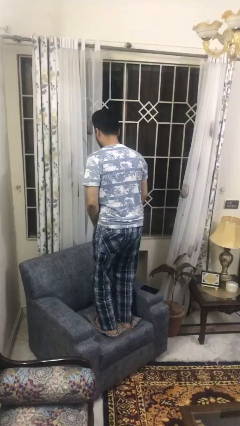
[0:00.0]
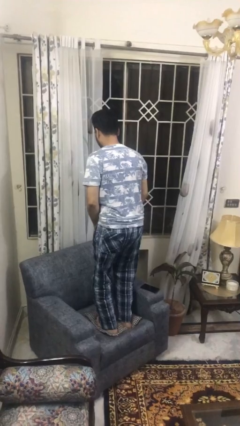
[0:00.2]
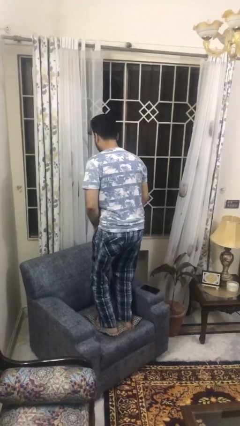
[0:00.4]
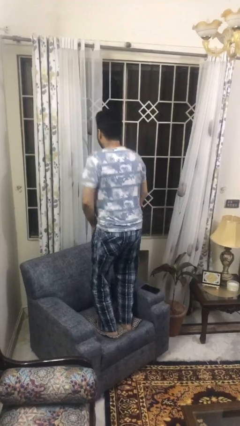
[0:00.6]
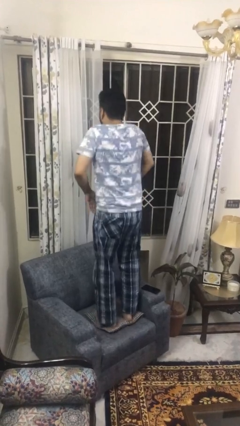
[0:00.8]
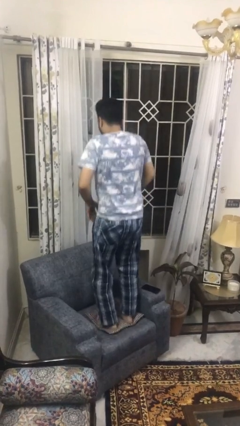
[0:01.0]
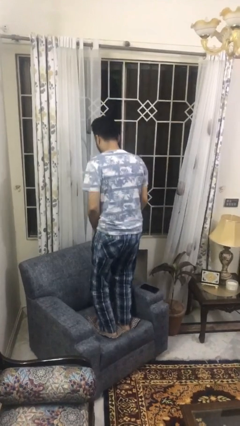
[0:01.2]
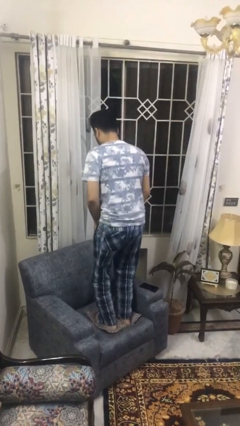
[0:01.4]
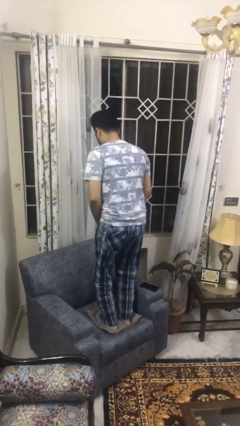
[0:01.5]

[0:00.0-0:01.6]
person jumps on couch

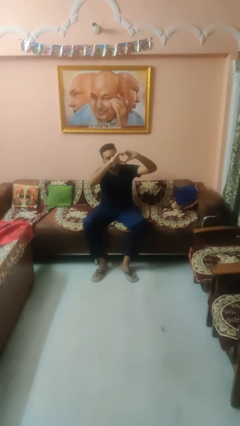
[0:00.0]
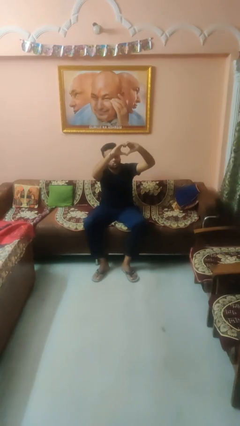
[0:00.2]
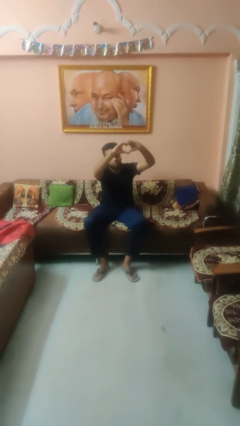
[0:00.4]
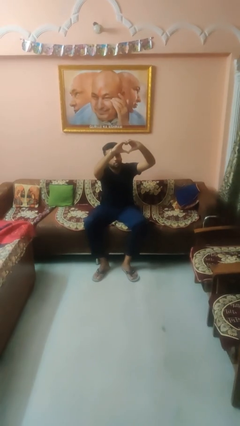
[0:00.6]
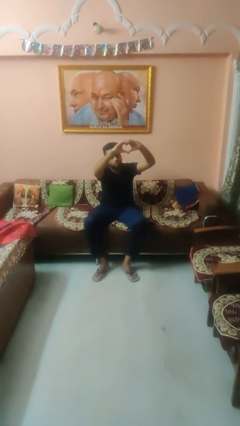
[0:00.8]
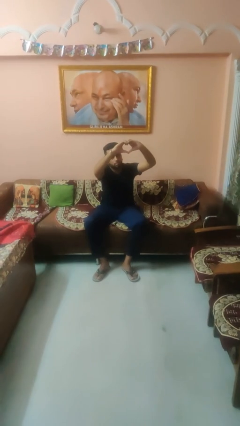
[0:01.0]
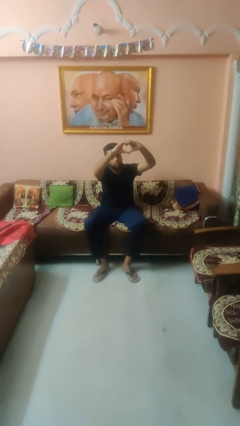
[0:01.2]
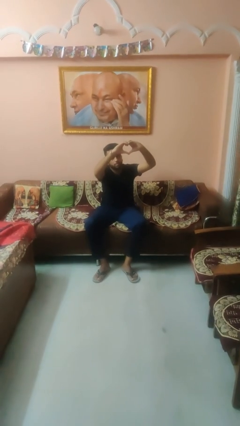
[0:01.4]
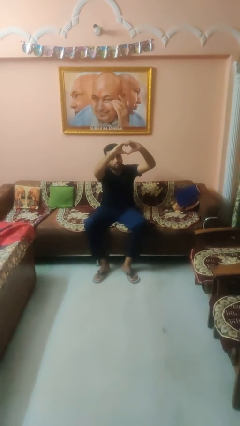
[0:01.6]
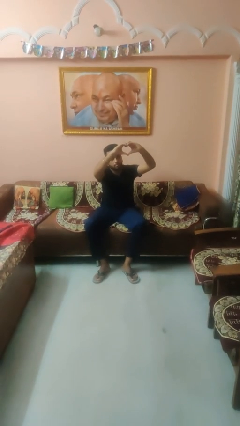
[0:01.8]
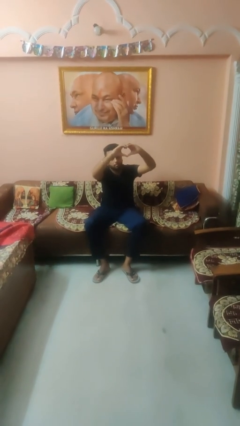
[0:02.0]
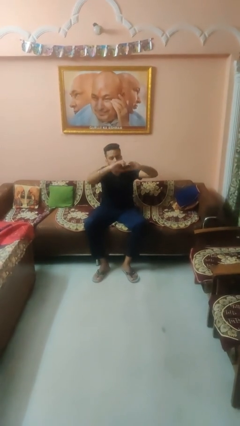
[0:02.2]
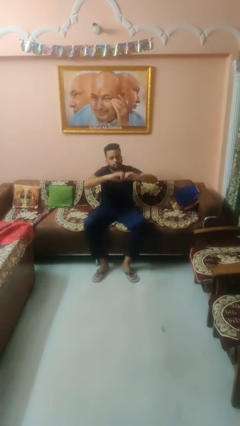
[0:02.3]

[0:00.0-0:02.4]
person gestures heart

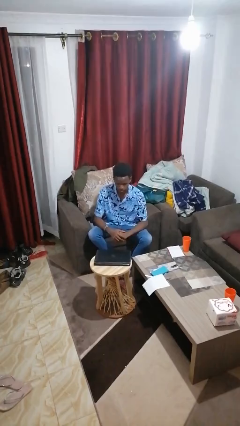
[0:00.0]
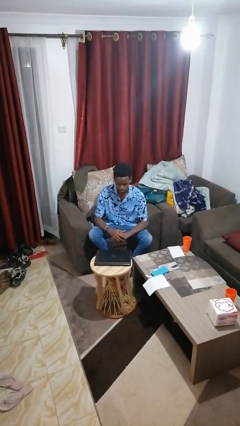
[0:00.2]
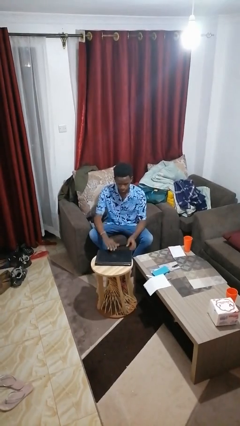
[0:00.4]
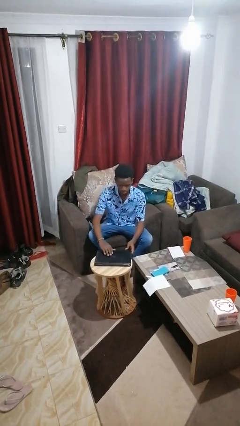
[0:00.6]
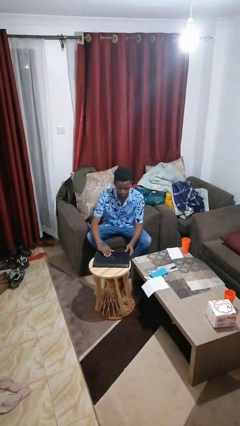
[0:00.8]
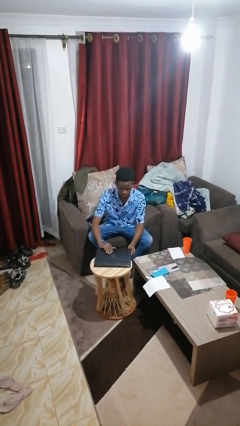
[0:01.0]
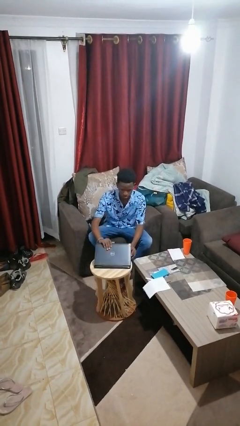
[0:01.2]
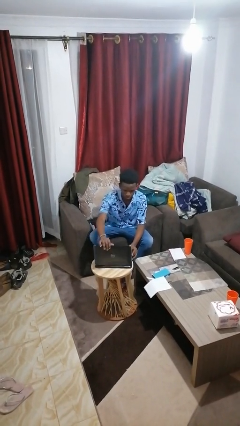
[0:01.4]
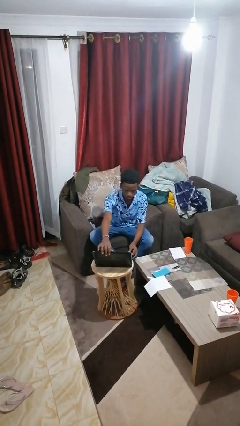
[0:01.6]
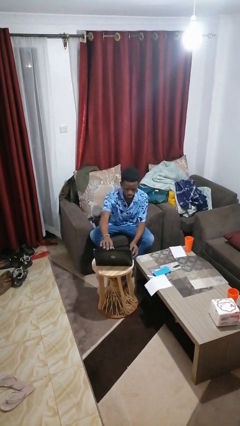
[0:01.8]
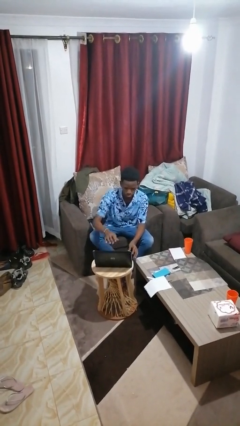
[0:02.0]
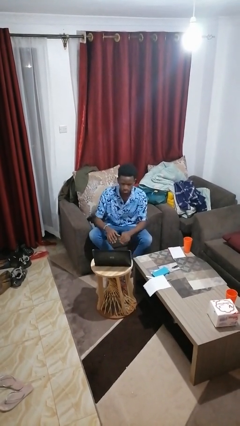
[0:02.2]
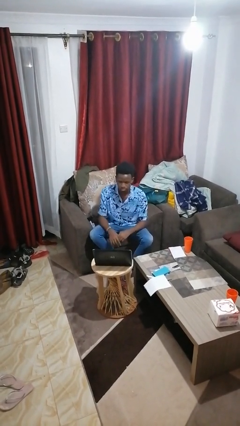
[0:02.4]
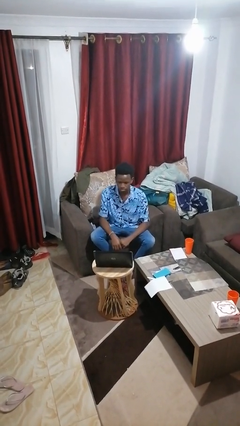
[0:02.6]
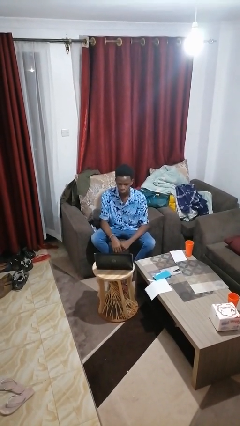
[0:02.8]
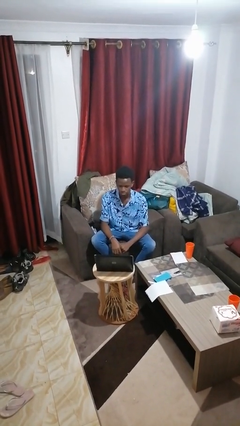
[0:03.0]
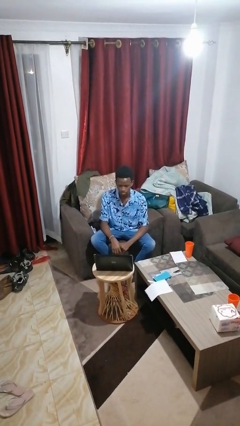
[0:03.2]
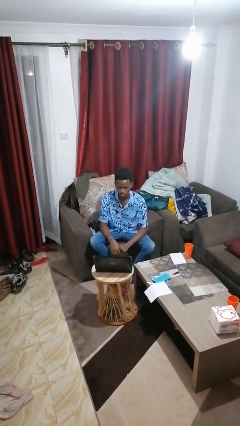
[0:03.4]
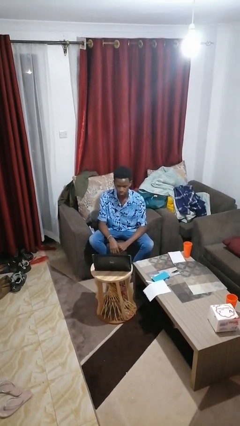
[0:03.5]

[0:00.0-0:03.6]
person opens laptop

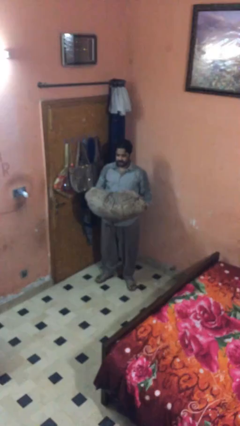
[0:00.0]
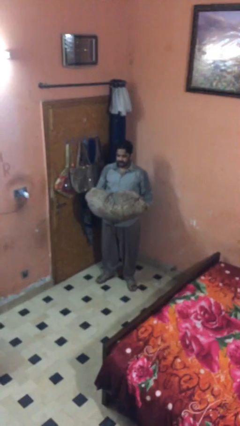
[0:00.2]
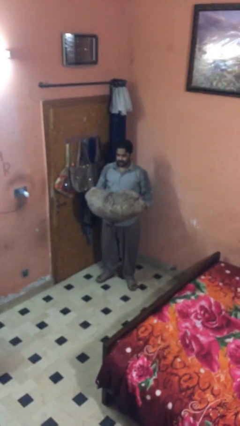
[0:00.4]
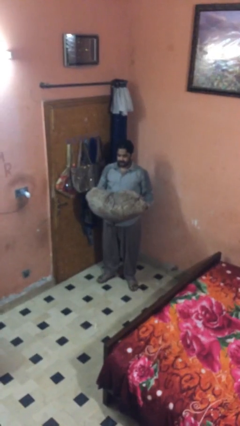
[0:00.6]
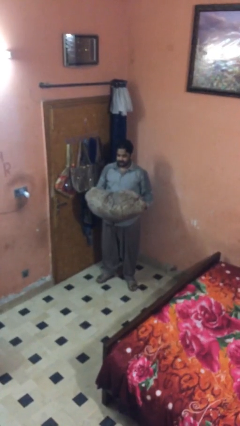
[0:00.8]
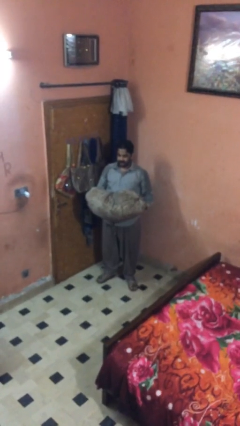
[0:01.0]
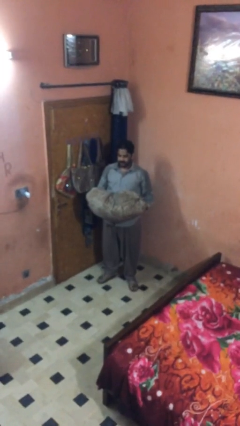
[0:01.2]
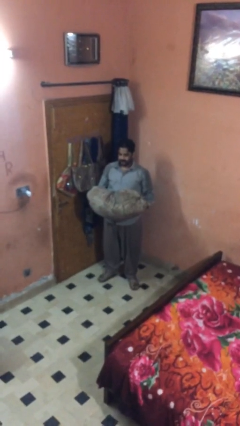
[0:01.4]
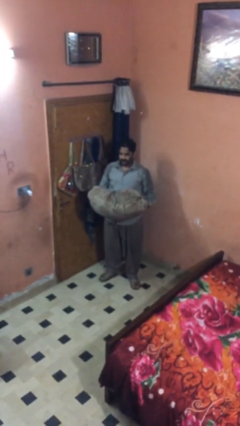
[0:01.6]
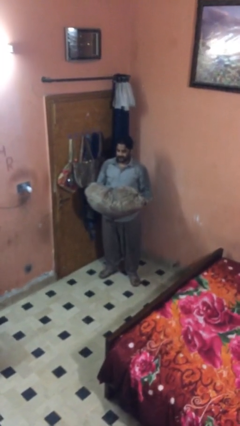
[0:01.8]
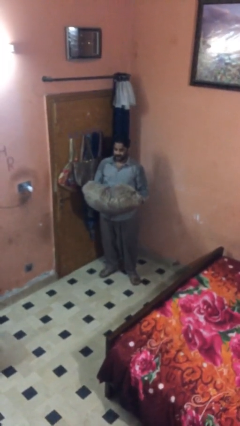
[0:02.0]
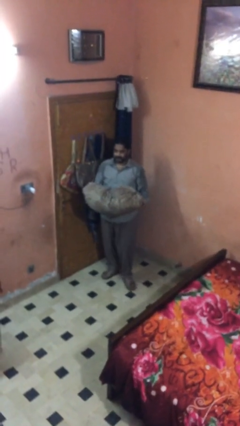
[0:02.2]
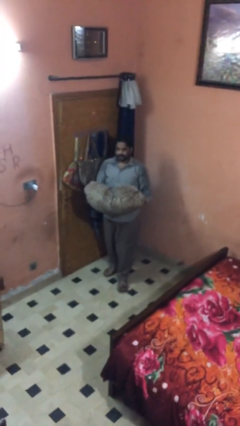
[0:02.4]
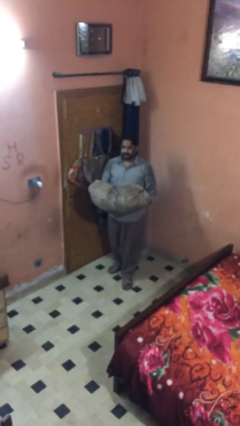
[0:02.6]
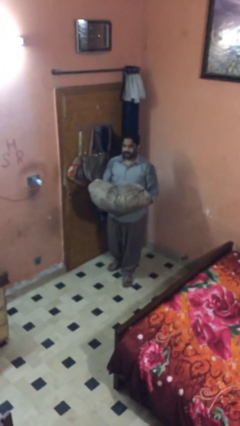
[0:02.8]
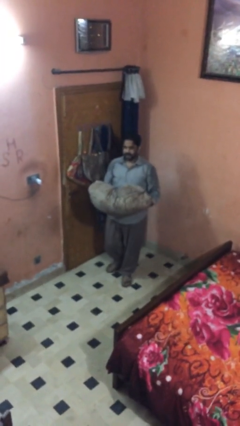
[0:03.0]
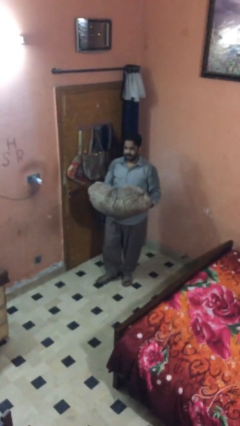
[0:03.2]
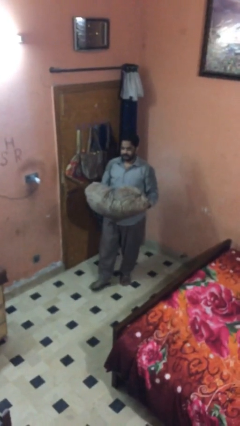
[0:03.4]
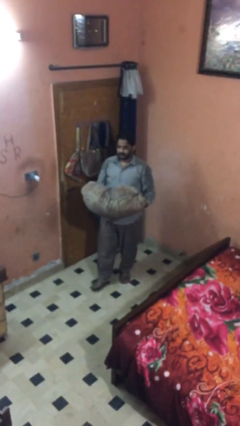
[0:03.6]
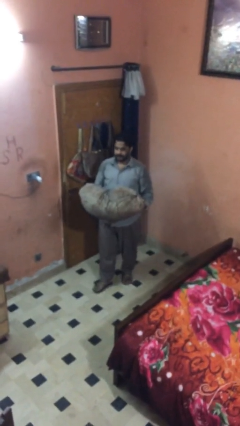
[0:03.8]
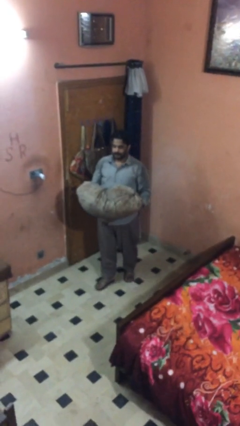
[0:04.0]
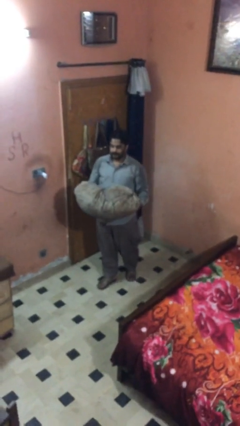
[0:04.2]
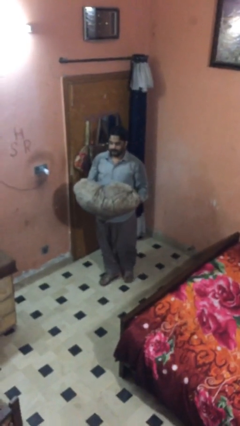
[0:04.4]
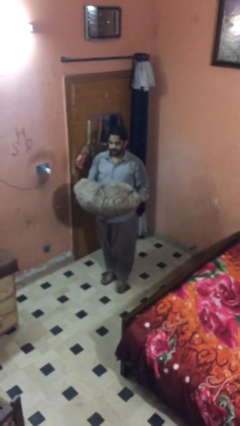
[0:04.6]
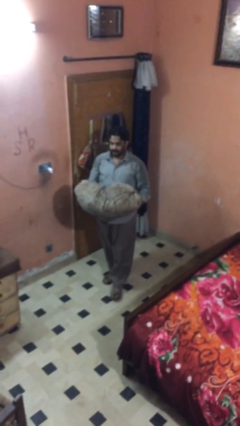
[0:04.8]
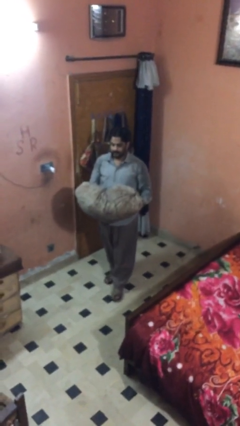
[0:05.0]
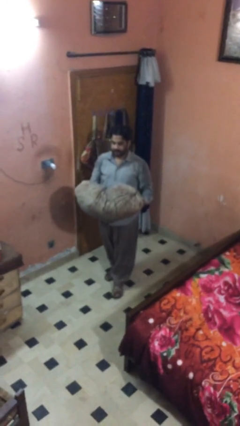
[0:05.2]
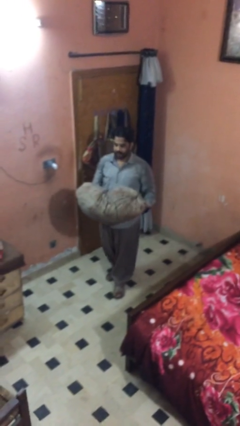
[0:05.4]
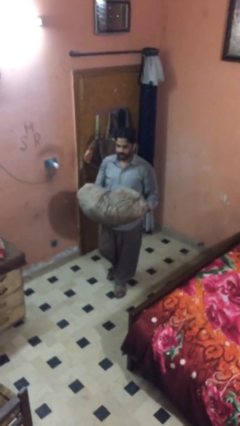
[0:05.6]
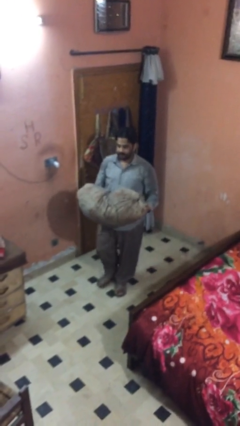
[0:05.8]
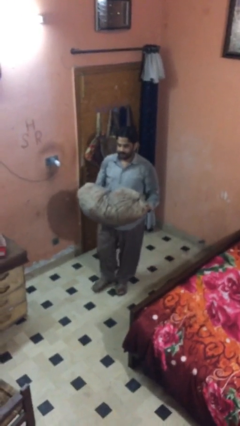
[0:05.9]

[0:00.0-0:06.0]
person carries heavy object

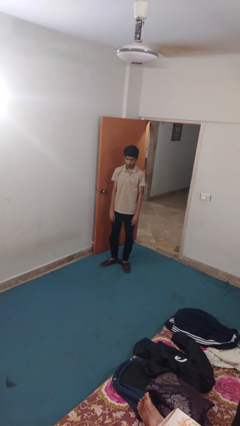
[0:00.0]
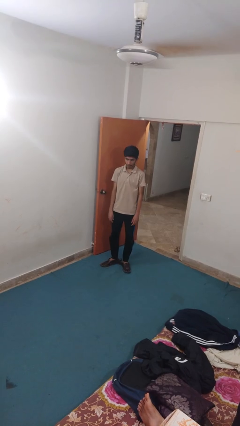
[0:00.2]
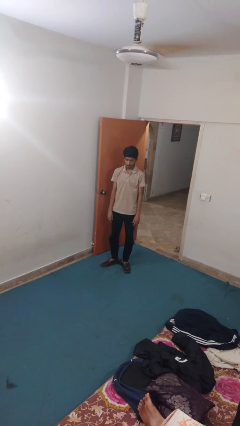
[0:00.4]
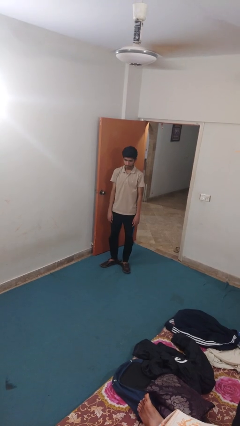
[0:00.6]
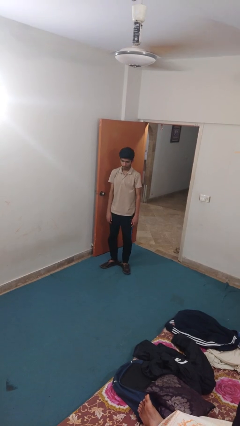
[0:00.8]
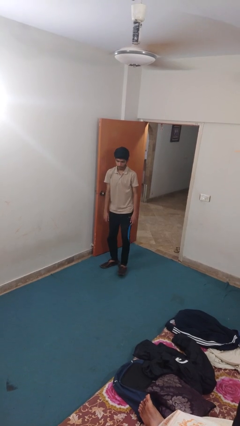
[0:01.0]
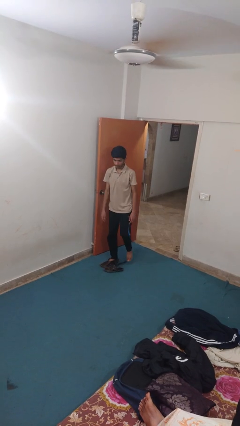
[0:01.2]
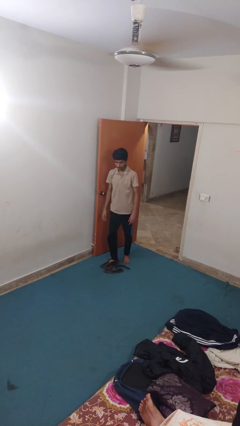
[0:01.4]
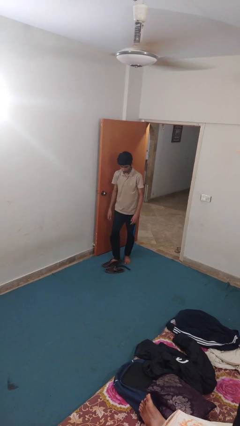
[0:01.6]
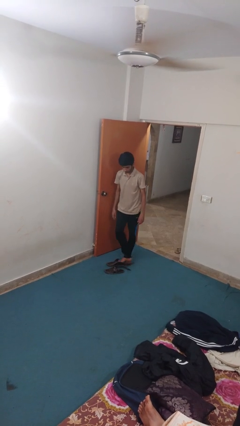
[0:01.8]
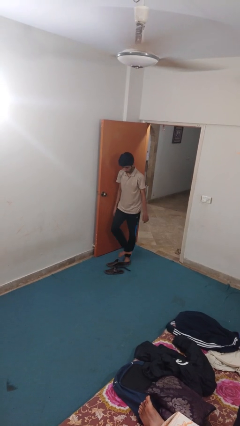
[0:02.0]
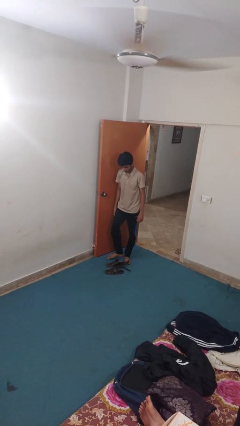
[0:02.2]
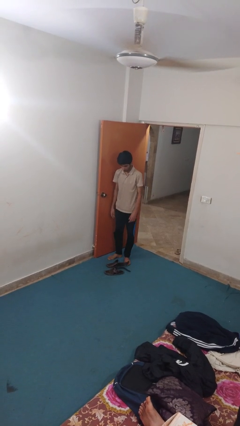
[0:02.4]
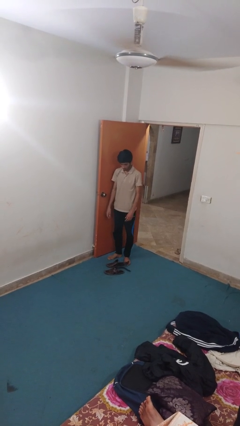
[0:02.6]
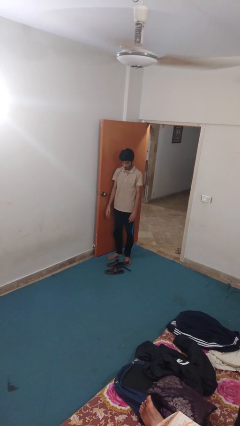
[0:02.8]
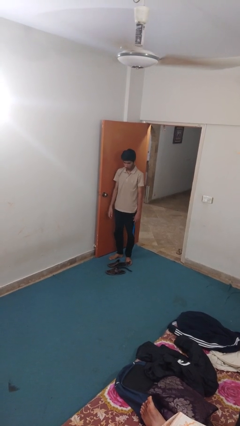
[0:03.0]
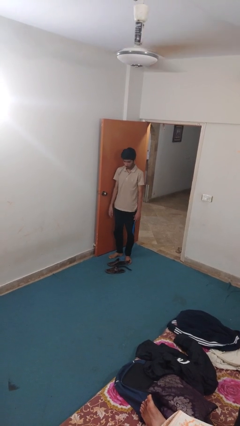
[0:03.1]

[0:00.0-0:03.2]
person takes off shoes

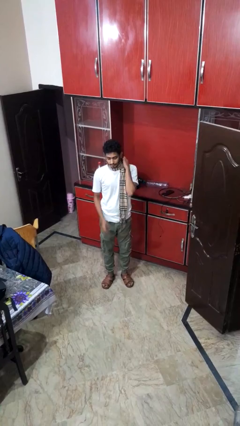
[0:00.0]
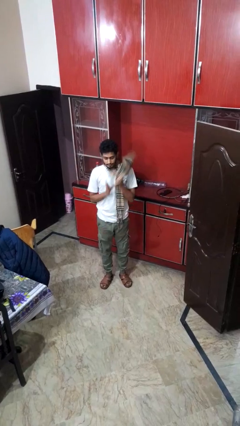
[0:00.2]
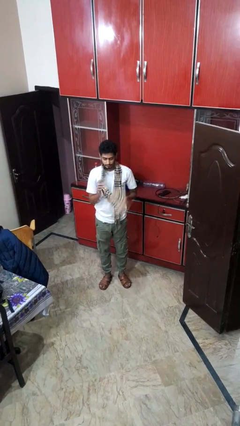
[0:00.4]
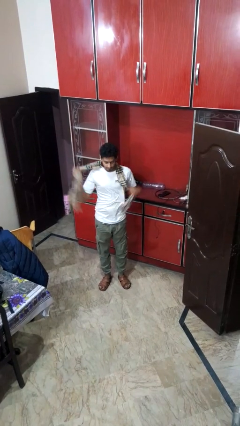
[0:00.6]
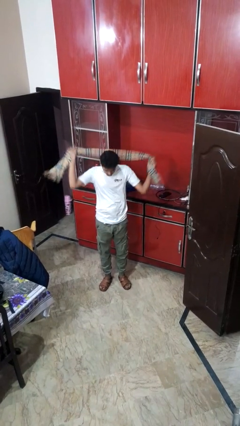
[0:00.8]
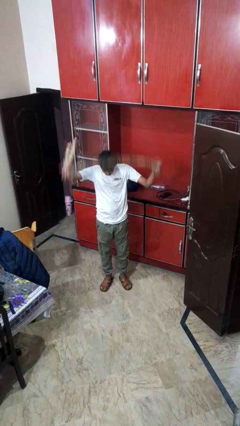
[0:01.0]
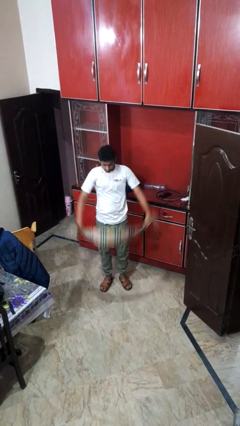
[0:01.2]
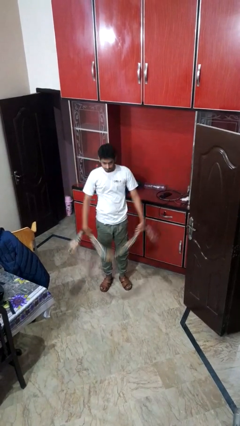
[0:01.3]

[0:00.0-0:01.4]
person takes off scarf
